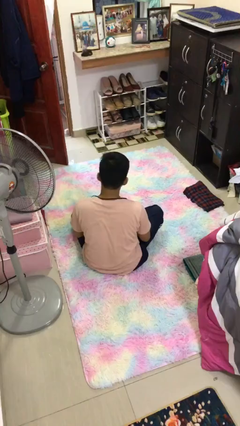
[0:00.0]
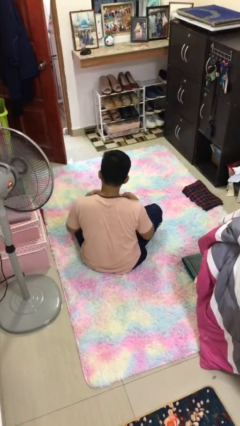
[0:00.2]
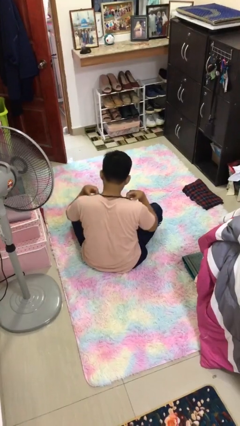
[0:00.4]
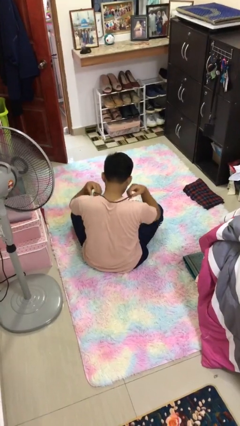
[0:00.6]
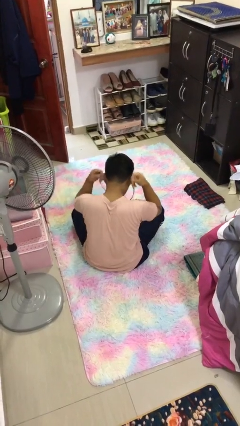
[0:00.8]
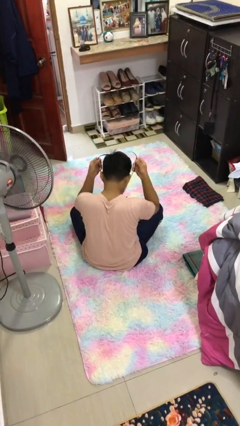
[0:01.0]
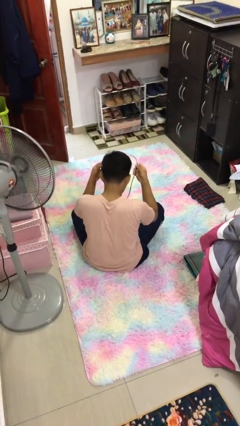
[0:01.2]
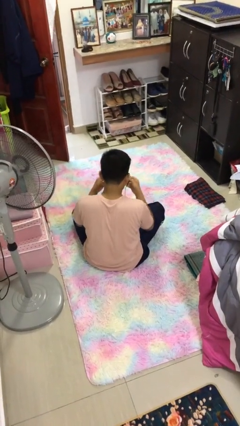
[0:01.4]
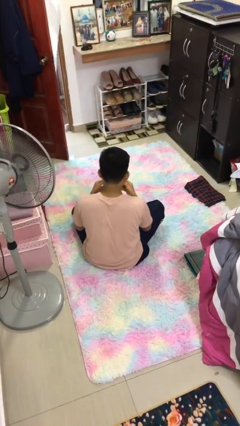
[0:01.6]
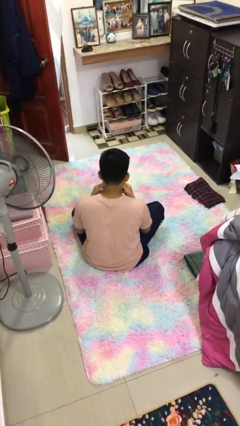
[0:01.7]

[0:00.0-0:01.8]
person takes off necklace

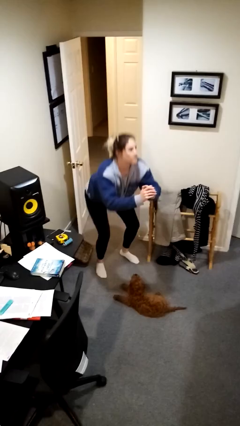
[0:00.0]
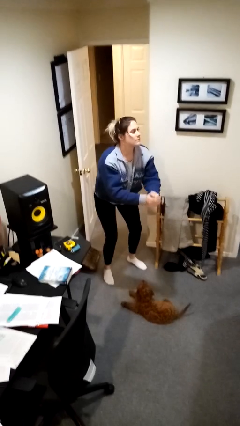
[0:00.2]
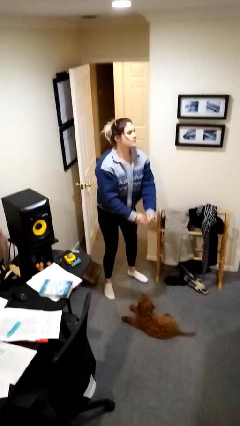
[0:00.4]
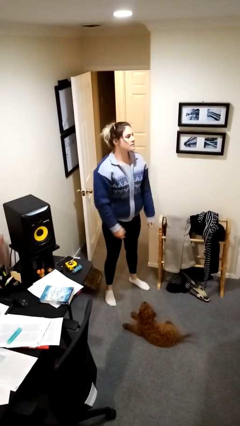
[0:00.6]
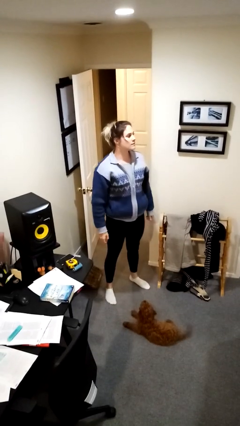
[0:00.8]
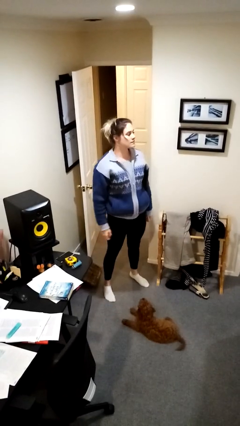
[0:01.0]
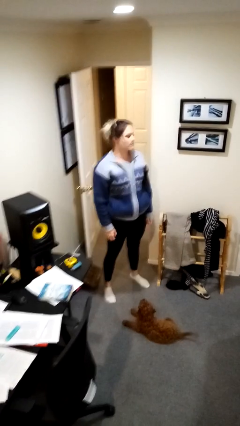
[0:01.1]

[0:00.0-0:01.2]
person stands up

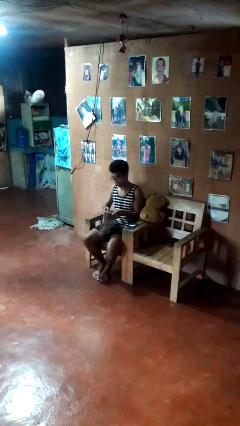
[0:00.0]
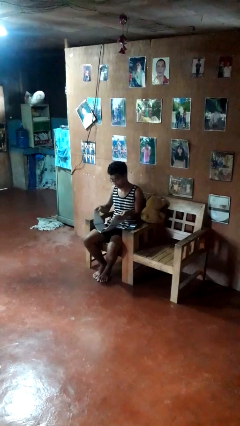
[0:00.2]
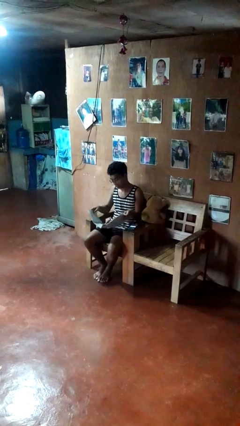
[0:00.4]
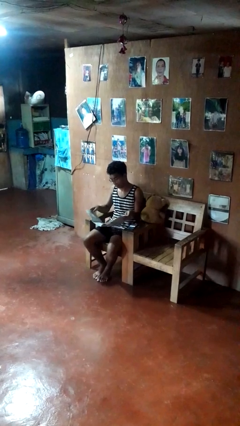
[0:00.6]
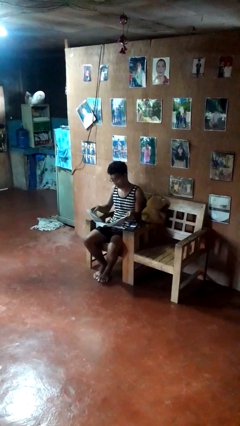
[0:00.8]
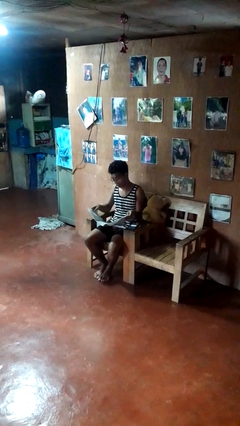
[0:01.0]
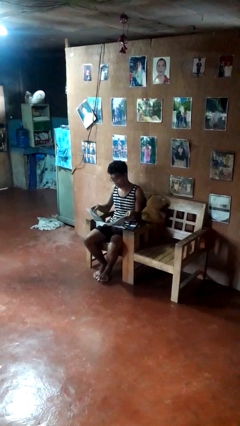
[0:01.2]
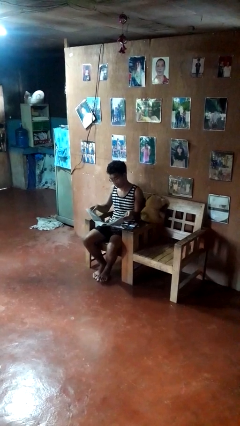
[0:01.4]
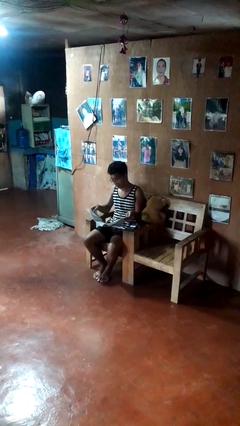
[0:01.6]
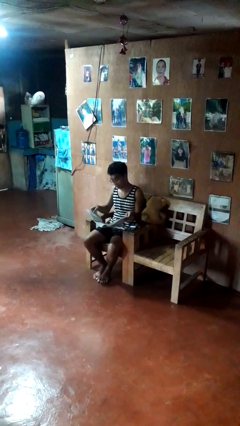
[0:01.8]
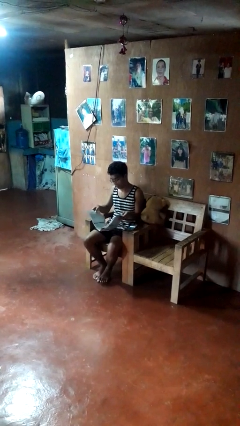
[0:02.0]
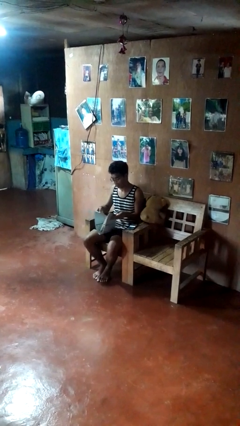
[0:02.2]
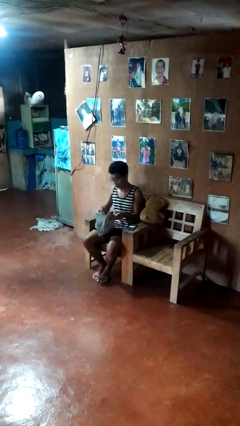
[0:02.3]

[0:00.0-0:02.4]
person reads newspaper

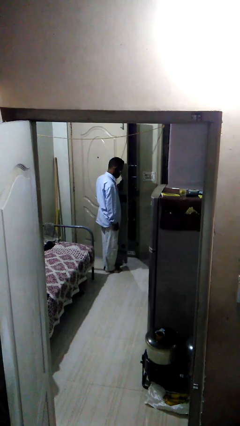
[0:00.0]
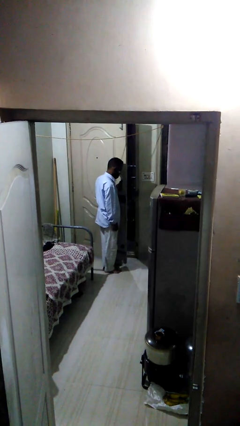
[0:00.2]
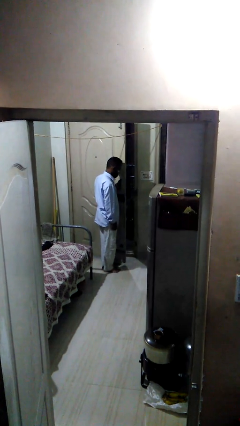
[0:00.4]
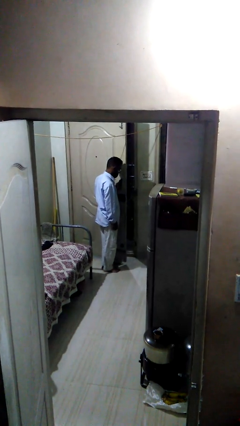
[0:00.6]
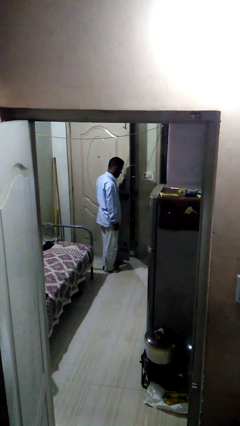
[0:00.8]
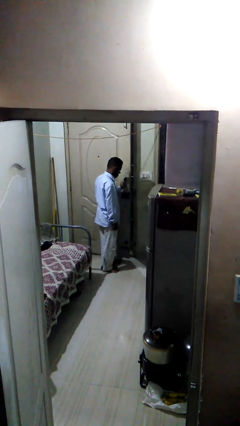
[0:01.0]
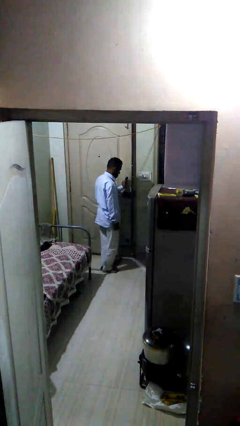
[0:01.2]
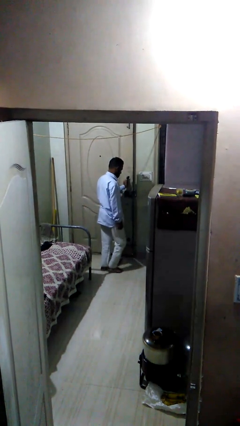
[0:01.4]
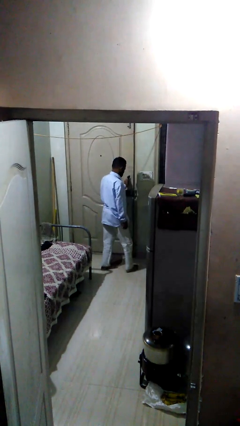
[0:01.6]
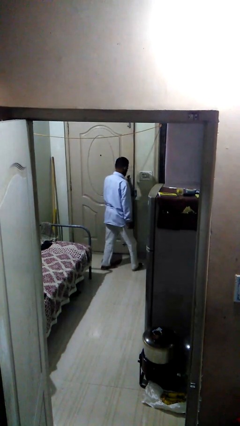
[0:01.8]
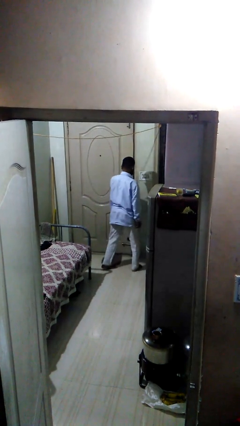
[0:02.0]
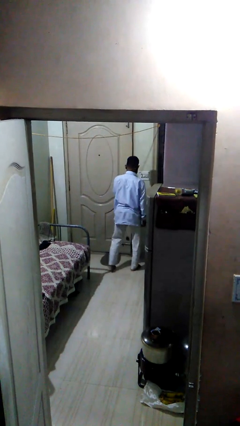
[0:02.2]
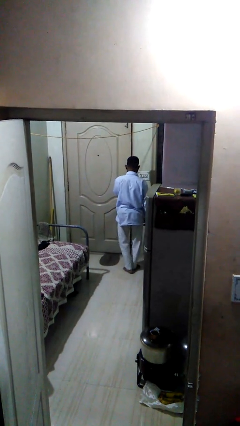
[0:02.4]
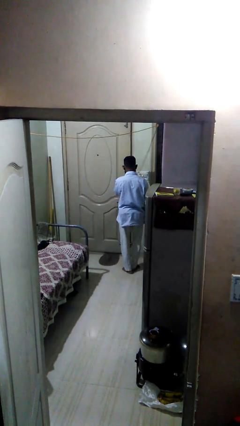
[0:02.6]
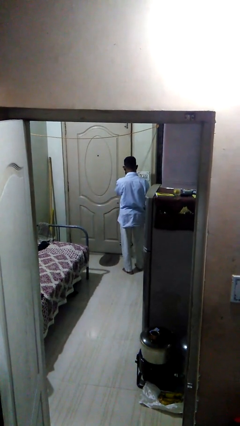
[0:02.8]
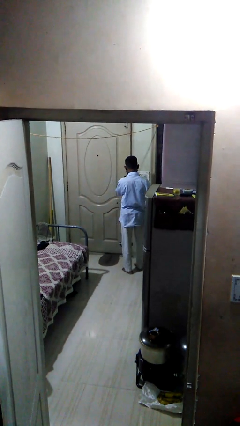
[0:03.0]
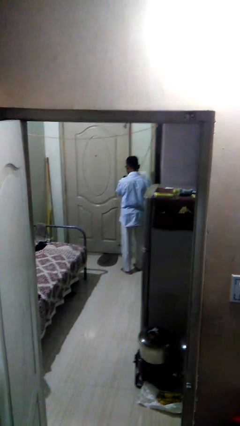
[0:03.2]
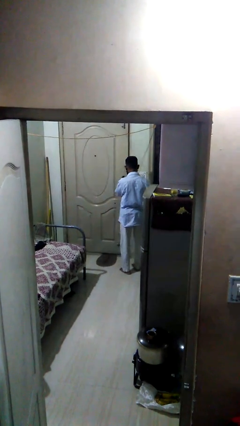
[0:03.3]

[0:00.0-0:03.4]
person closes facility door

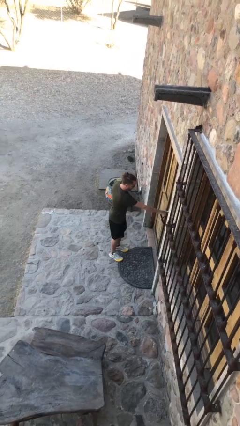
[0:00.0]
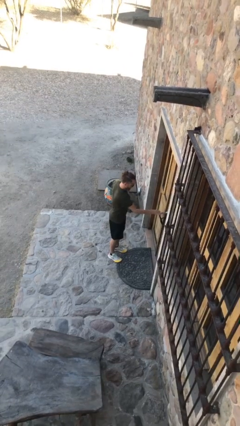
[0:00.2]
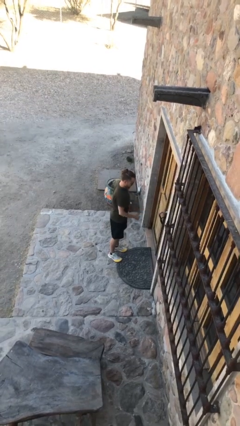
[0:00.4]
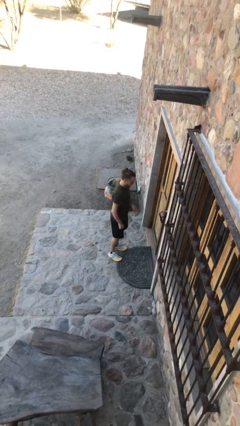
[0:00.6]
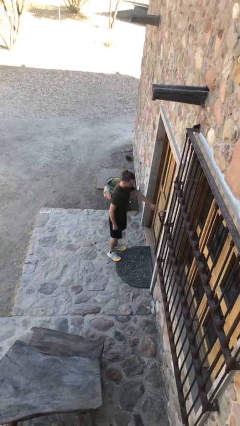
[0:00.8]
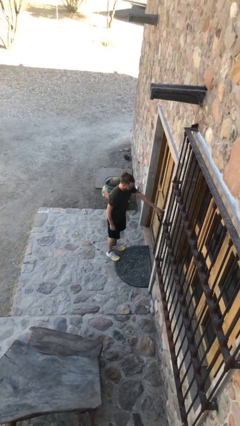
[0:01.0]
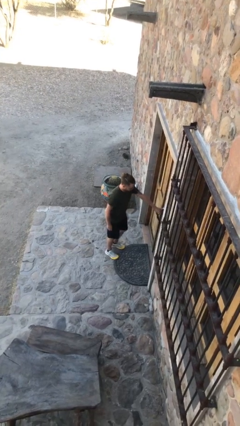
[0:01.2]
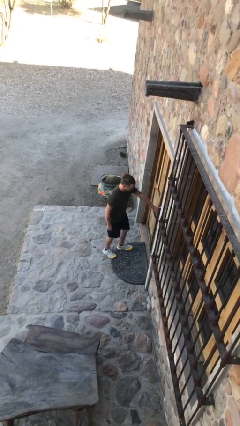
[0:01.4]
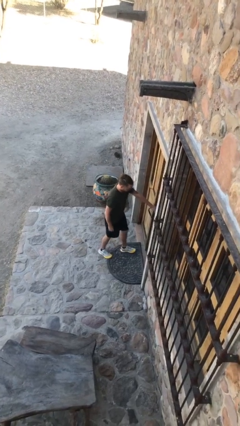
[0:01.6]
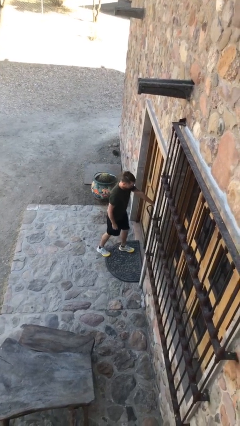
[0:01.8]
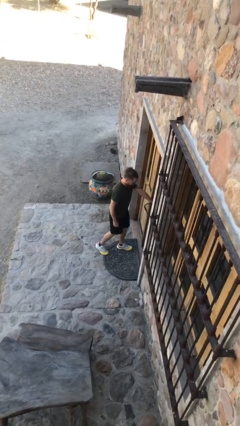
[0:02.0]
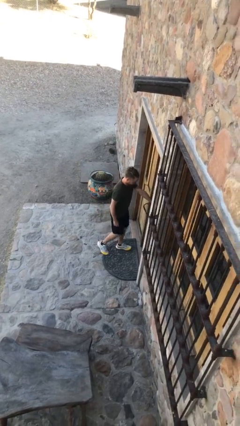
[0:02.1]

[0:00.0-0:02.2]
person opens facility door

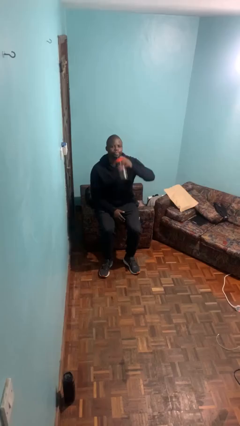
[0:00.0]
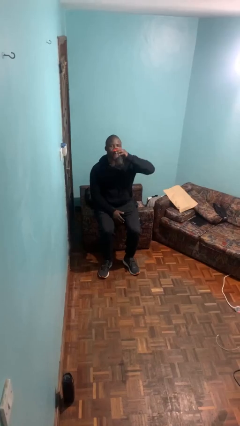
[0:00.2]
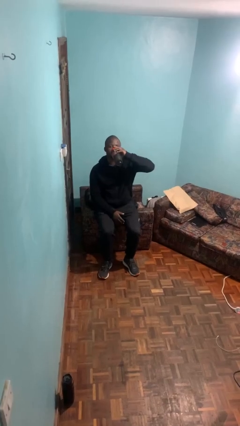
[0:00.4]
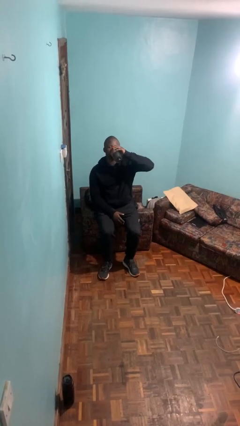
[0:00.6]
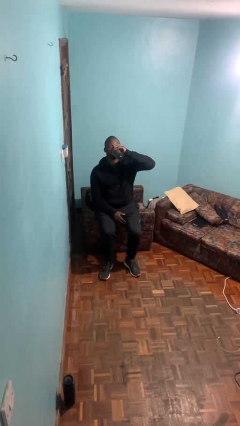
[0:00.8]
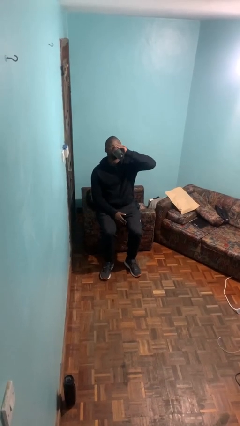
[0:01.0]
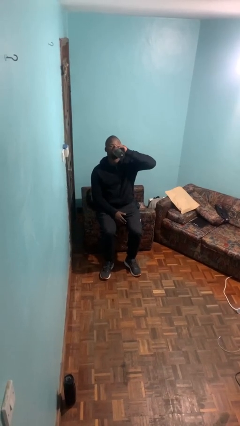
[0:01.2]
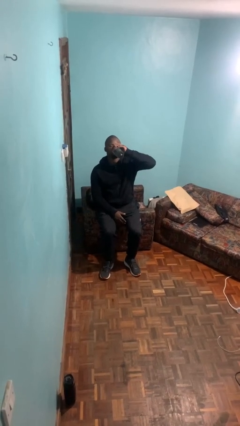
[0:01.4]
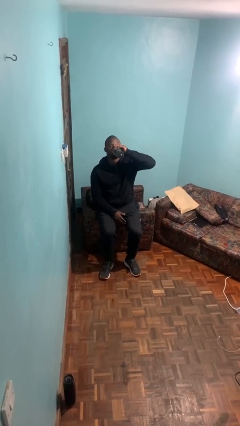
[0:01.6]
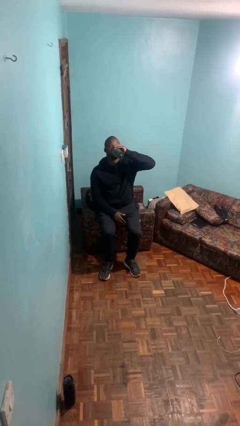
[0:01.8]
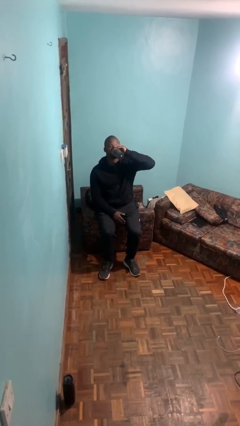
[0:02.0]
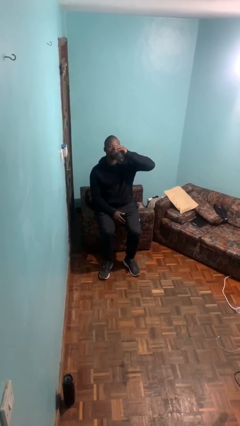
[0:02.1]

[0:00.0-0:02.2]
person drinks from bottle

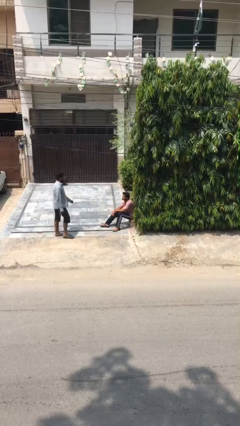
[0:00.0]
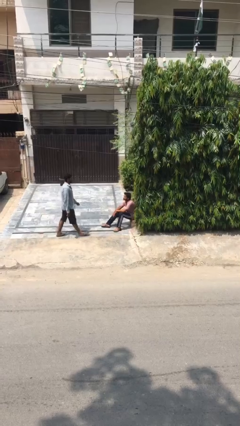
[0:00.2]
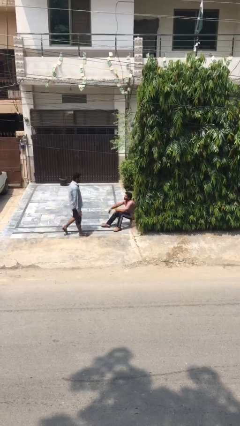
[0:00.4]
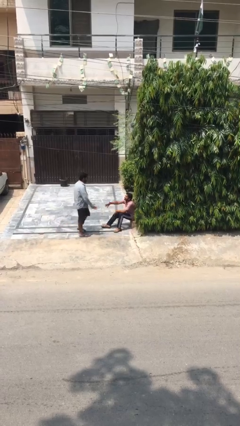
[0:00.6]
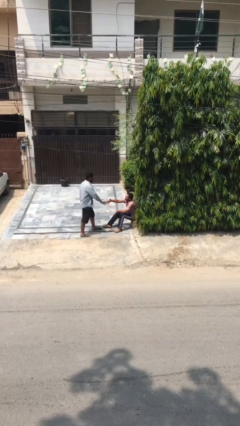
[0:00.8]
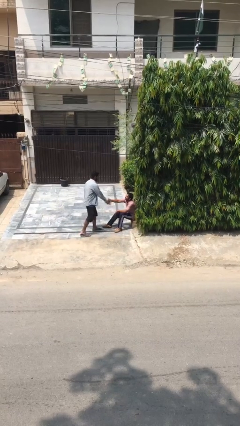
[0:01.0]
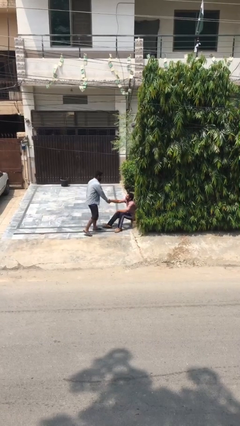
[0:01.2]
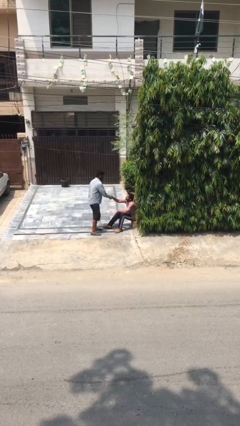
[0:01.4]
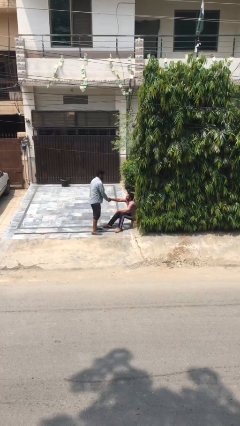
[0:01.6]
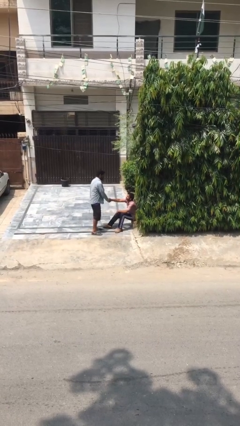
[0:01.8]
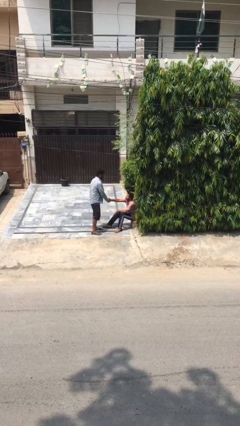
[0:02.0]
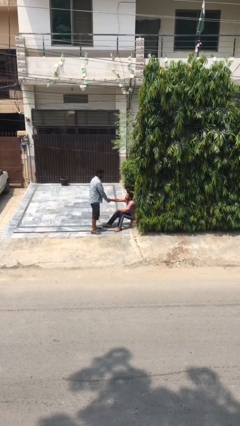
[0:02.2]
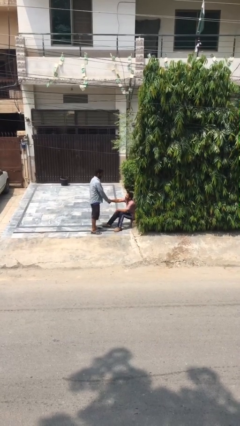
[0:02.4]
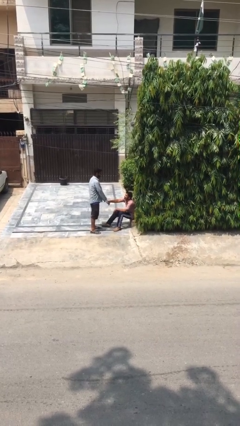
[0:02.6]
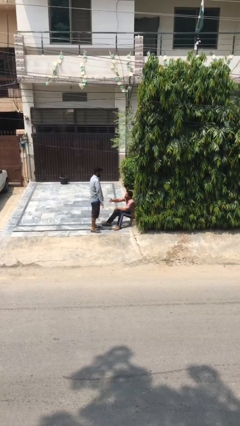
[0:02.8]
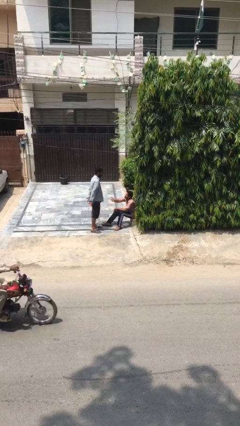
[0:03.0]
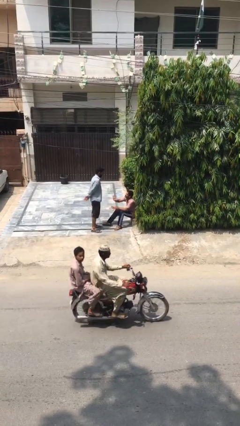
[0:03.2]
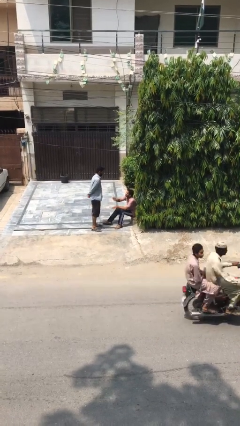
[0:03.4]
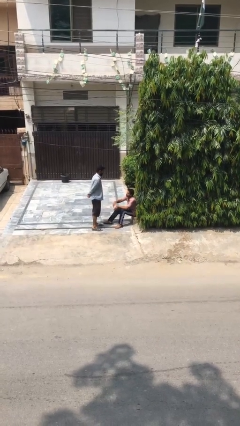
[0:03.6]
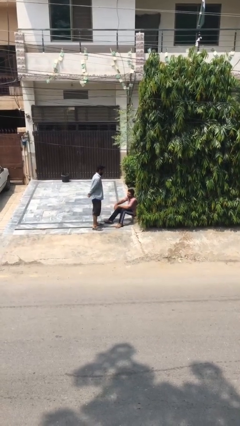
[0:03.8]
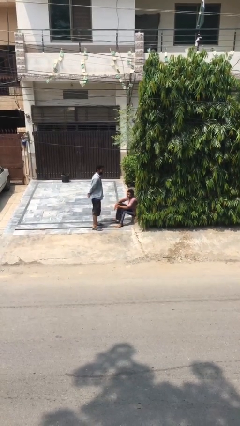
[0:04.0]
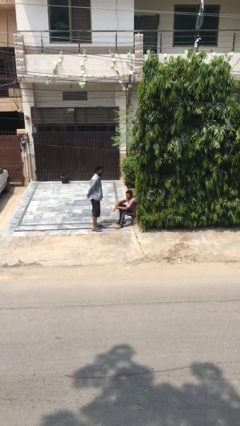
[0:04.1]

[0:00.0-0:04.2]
person shakes hand
